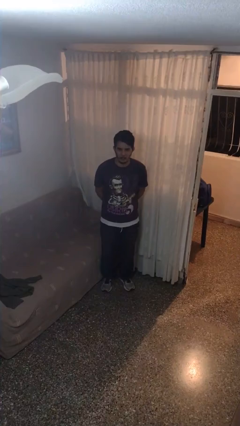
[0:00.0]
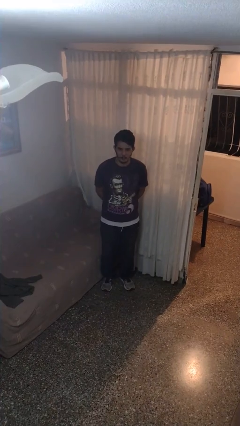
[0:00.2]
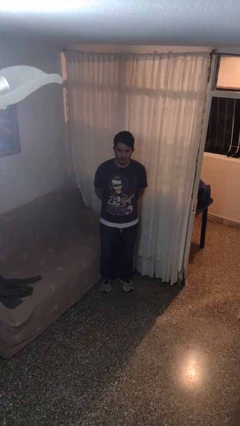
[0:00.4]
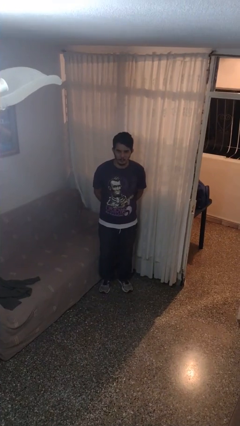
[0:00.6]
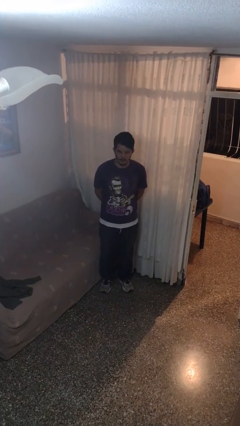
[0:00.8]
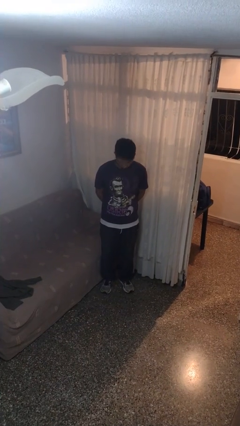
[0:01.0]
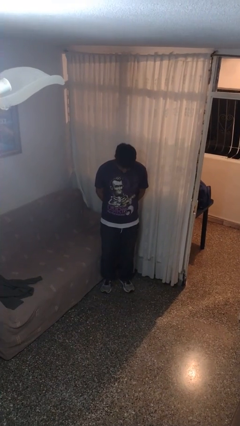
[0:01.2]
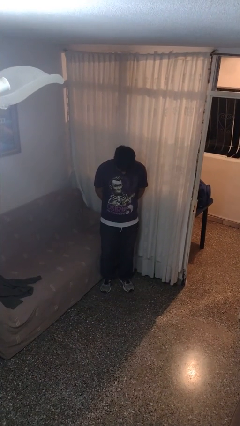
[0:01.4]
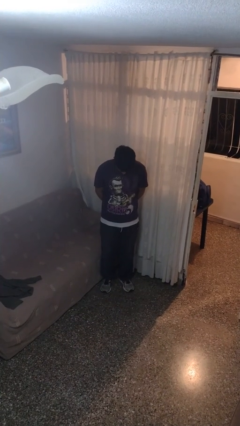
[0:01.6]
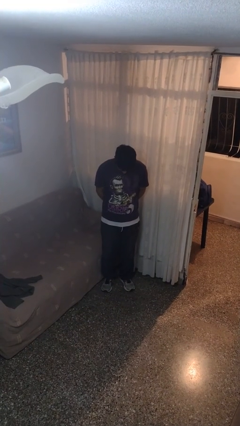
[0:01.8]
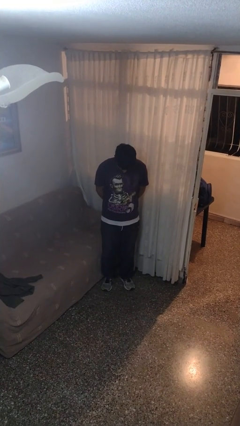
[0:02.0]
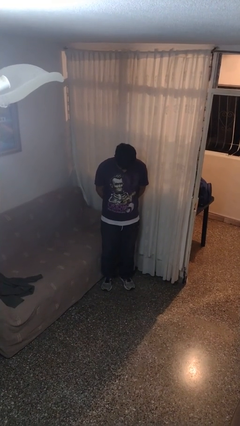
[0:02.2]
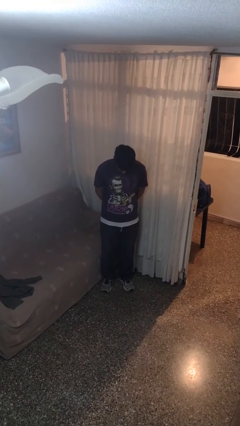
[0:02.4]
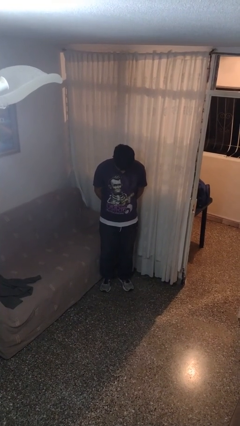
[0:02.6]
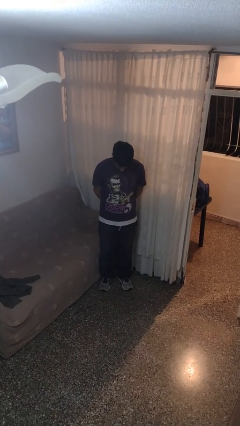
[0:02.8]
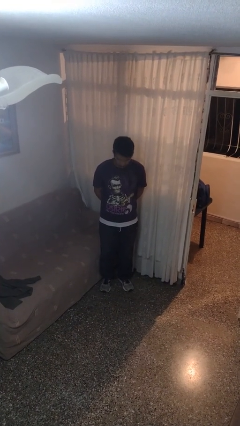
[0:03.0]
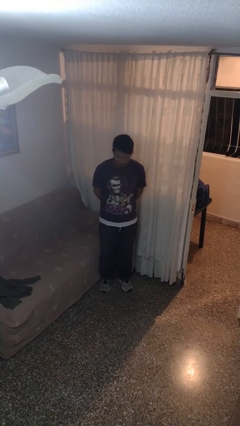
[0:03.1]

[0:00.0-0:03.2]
person prays

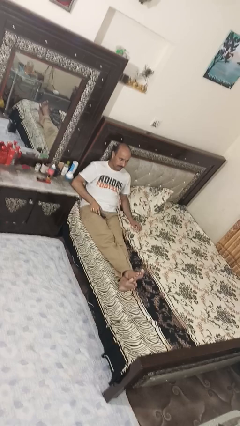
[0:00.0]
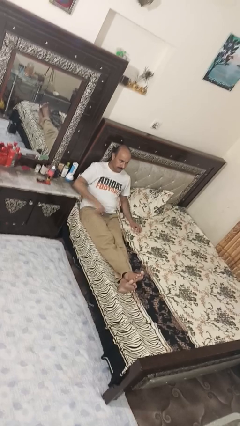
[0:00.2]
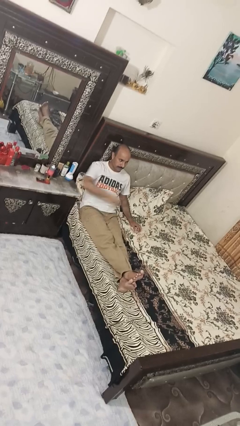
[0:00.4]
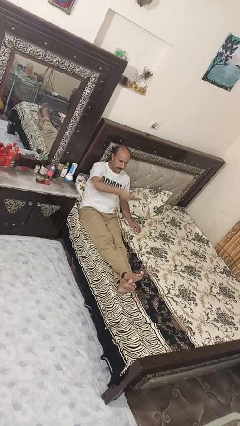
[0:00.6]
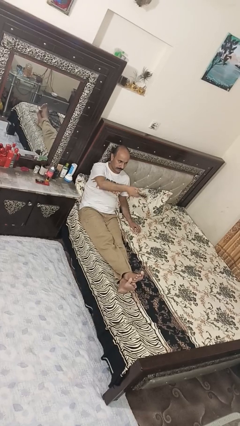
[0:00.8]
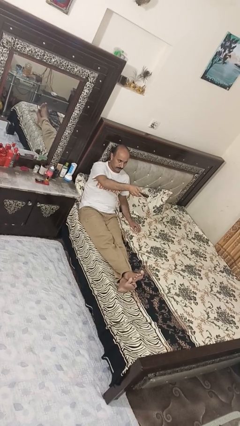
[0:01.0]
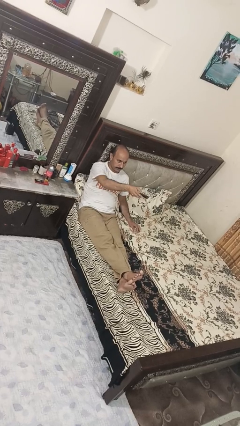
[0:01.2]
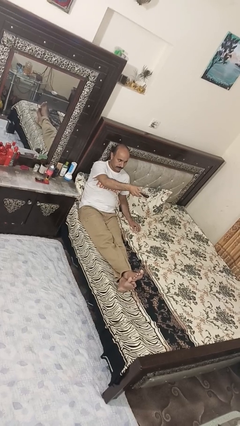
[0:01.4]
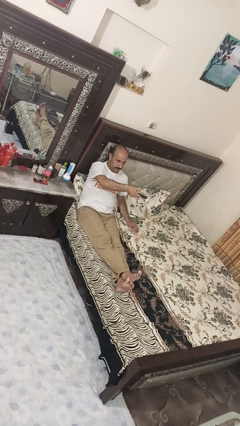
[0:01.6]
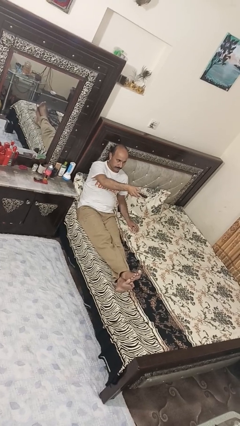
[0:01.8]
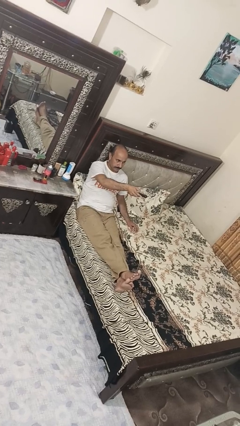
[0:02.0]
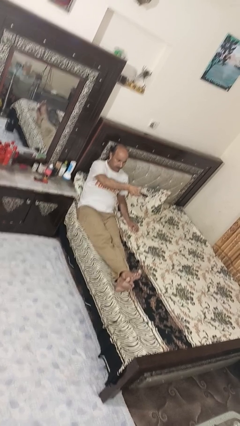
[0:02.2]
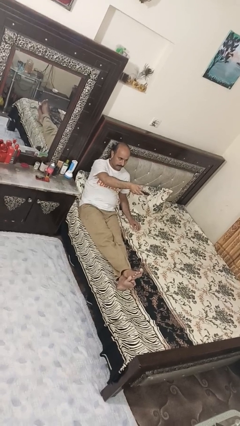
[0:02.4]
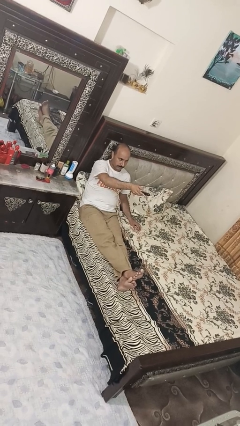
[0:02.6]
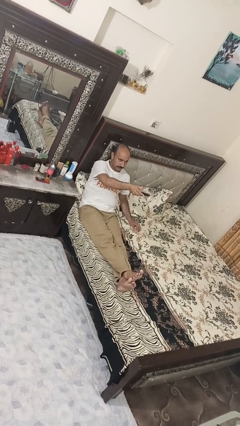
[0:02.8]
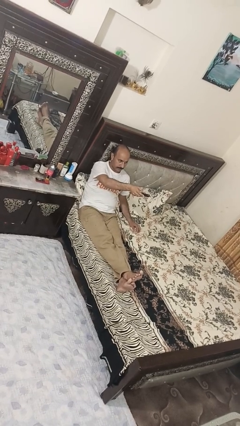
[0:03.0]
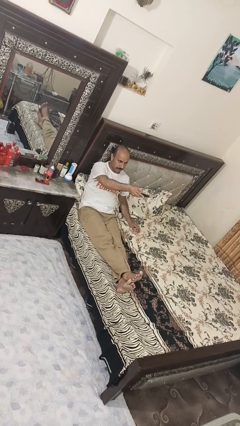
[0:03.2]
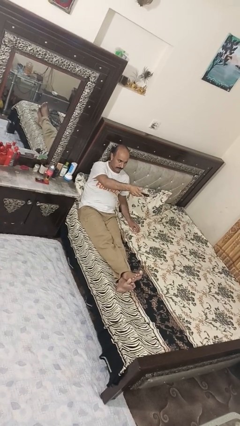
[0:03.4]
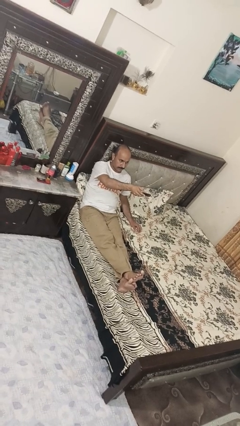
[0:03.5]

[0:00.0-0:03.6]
person uses television remote

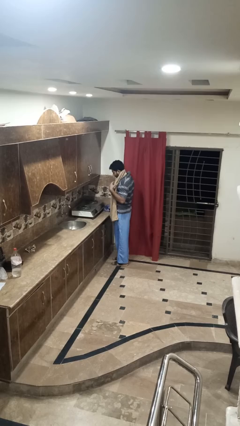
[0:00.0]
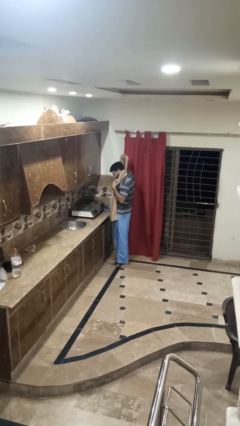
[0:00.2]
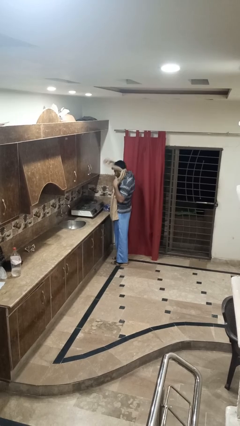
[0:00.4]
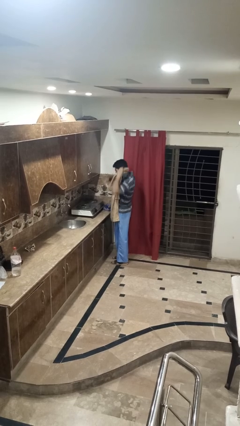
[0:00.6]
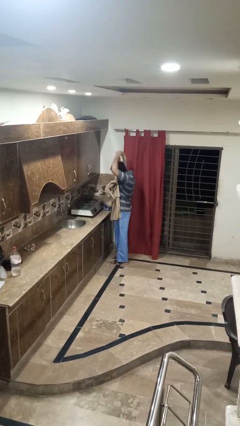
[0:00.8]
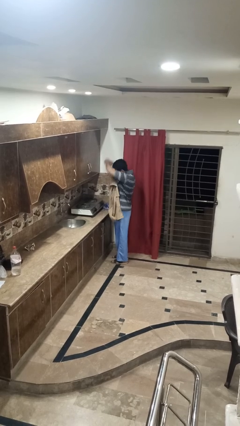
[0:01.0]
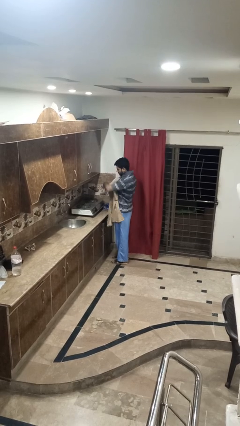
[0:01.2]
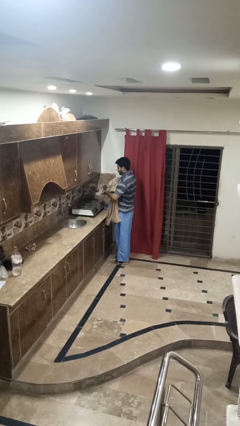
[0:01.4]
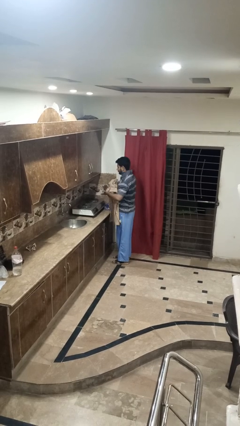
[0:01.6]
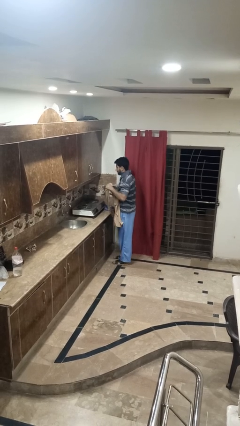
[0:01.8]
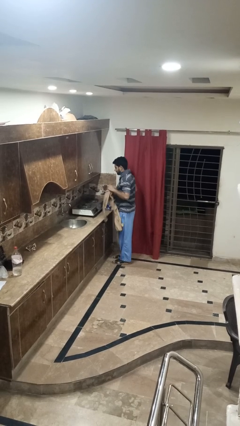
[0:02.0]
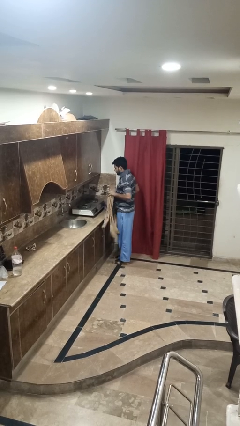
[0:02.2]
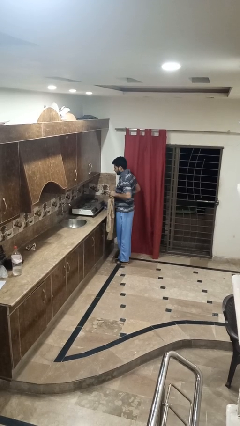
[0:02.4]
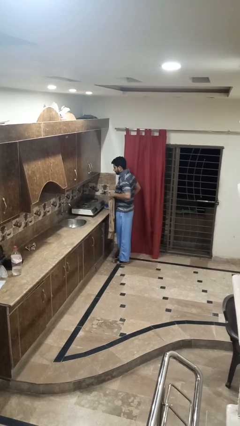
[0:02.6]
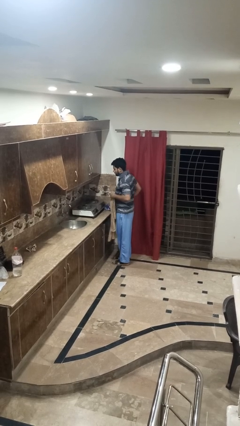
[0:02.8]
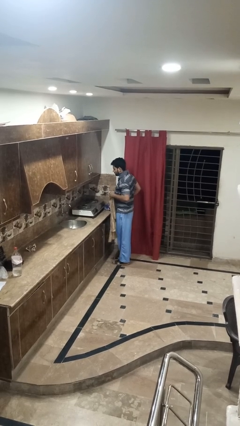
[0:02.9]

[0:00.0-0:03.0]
person takes off apron

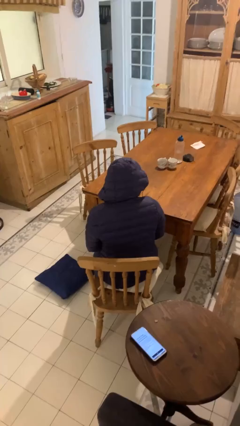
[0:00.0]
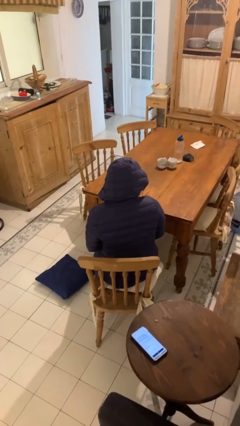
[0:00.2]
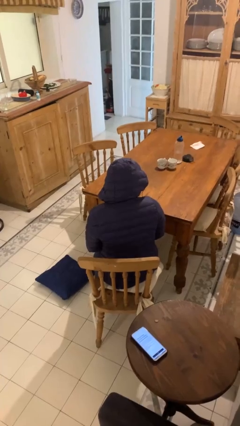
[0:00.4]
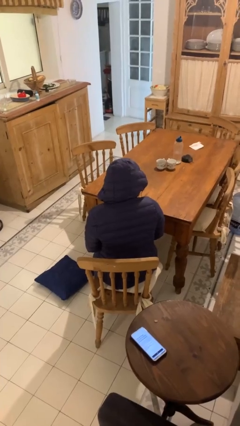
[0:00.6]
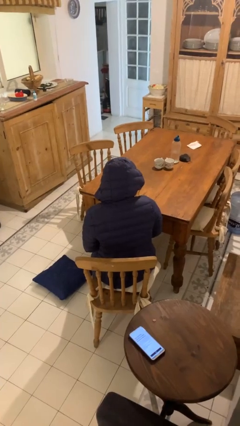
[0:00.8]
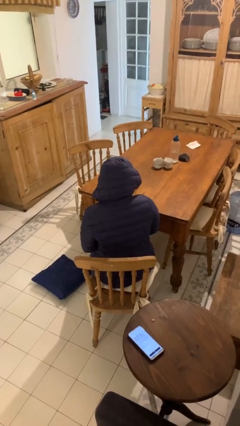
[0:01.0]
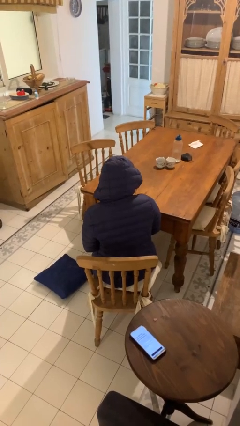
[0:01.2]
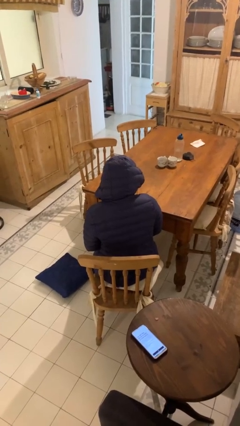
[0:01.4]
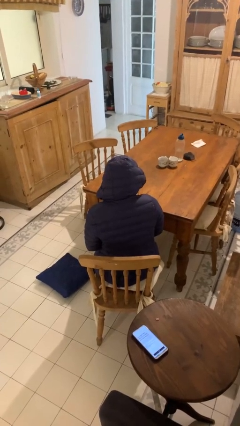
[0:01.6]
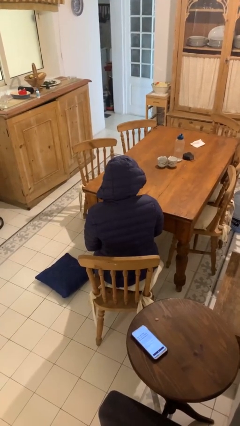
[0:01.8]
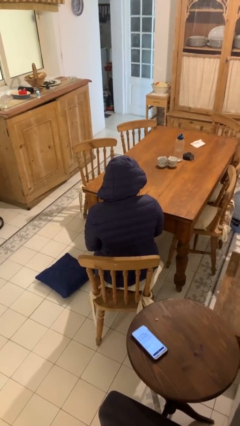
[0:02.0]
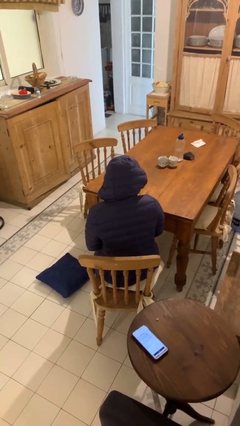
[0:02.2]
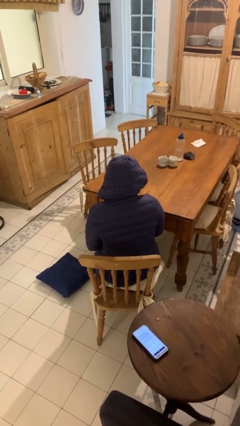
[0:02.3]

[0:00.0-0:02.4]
person falls from chair

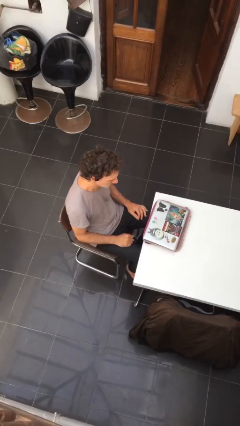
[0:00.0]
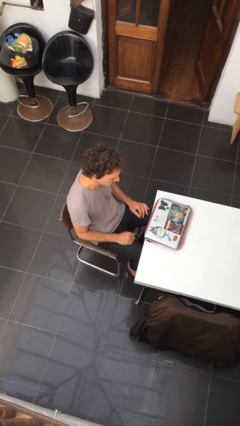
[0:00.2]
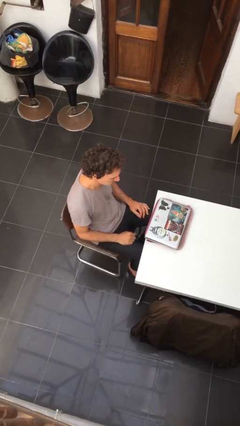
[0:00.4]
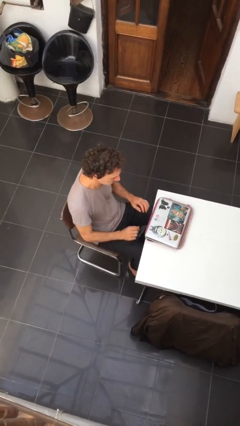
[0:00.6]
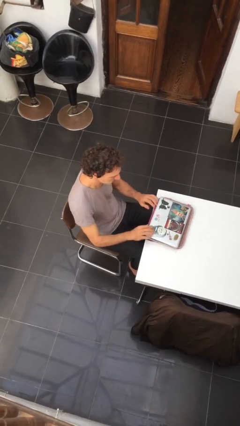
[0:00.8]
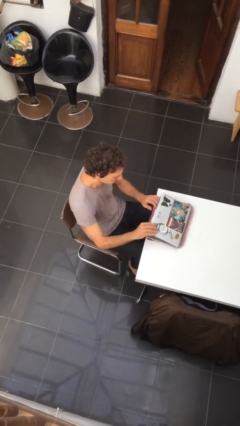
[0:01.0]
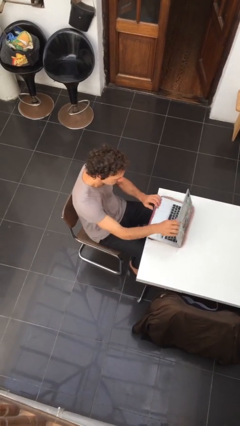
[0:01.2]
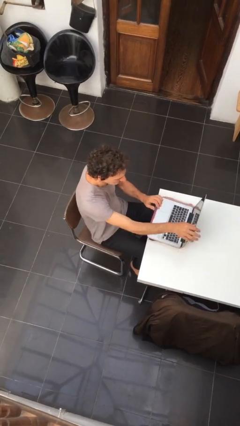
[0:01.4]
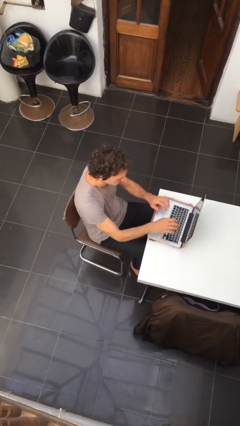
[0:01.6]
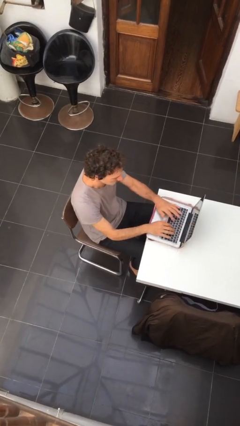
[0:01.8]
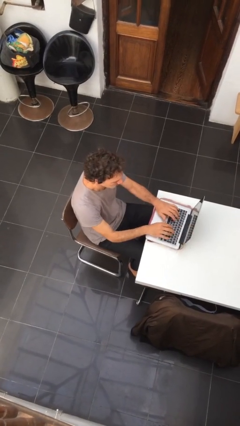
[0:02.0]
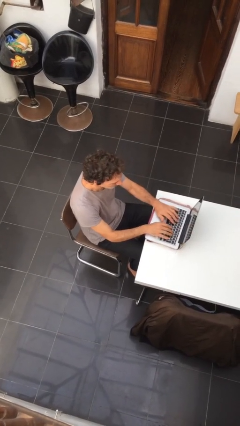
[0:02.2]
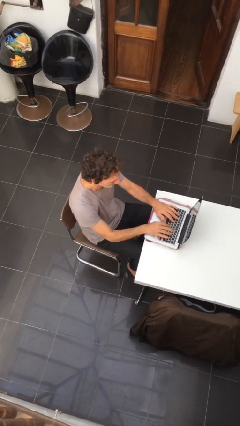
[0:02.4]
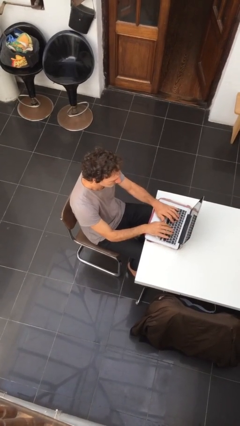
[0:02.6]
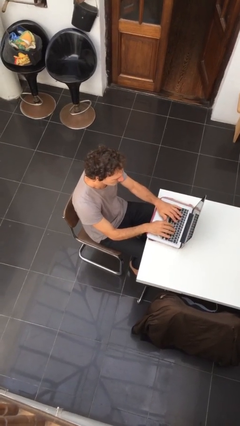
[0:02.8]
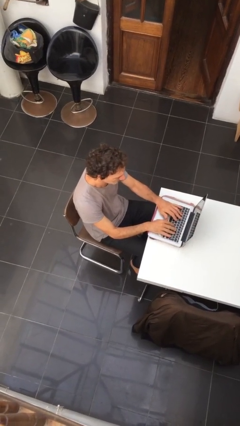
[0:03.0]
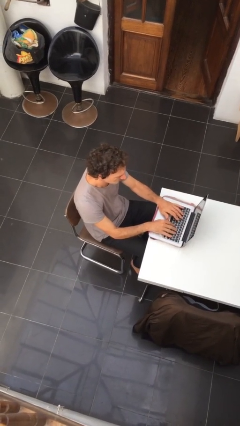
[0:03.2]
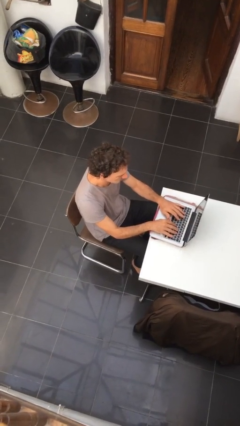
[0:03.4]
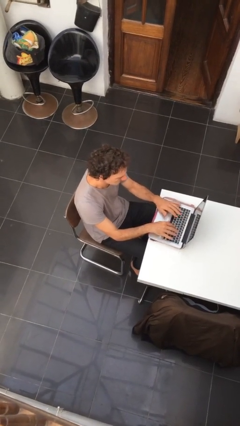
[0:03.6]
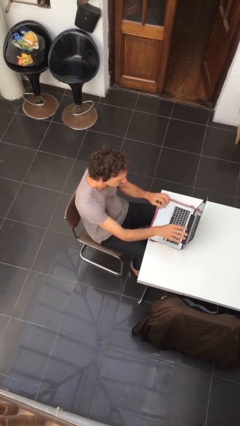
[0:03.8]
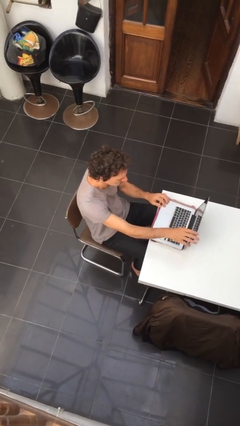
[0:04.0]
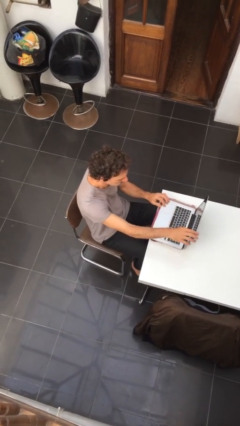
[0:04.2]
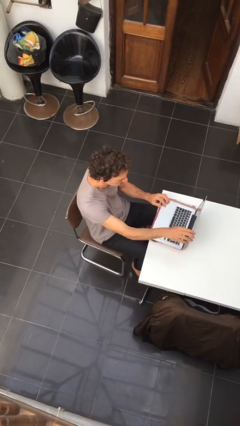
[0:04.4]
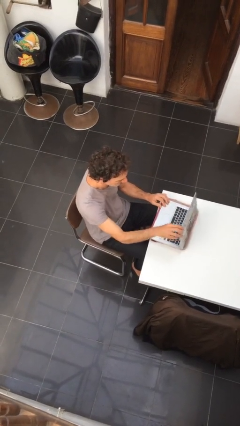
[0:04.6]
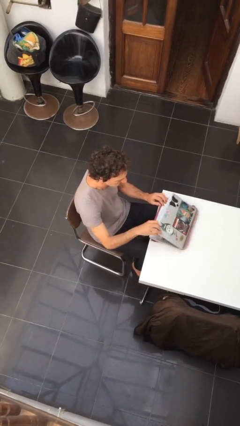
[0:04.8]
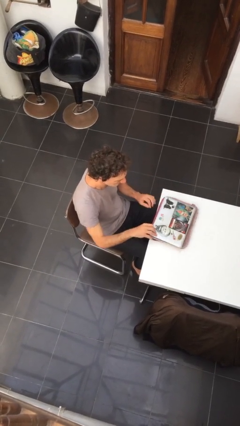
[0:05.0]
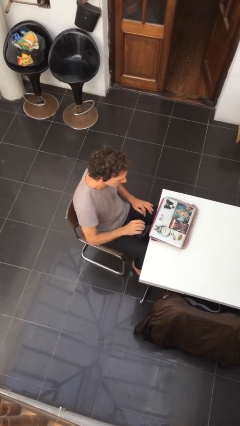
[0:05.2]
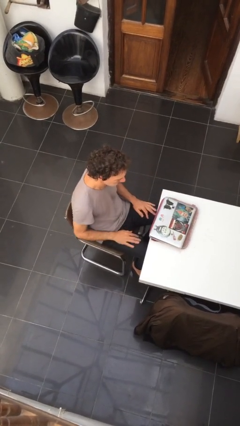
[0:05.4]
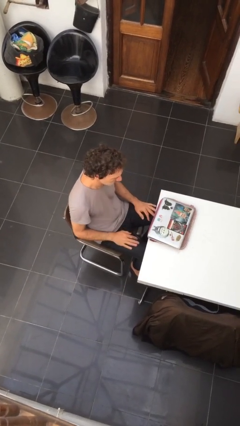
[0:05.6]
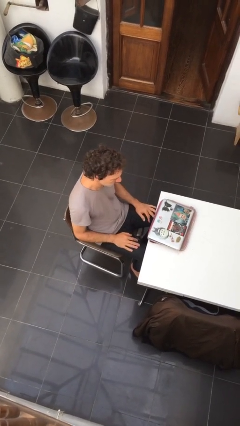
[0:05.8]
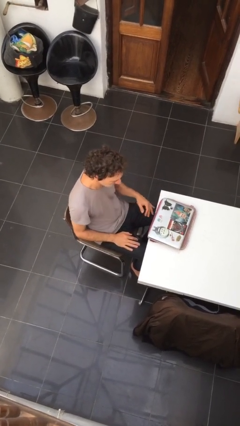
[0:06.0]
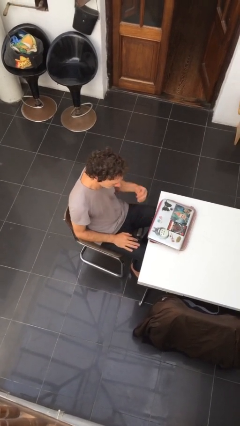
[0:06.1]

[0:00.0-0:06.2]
person interacts with laptop
